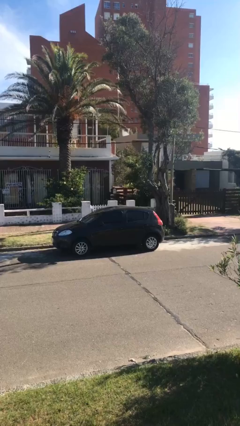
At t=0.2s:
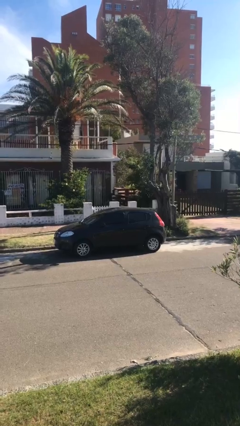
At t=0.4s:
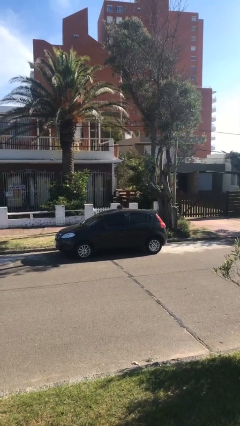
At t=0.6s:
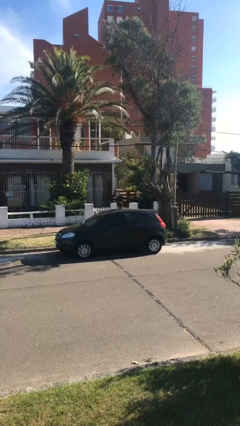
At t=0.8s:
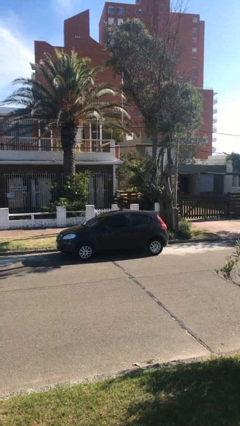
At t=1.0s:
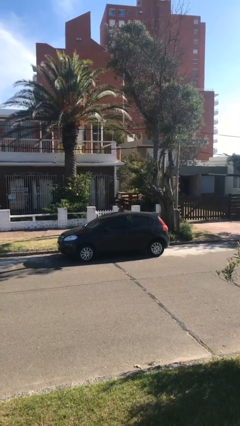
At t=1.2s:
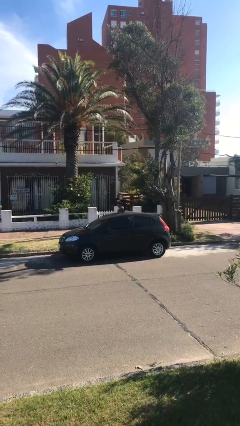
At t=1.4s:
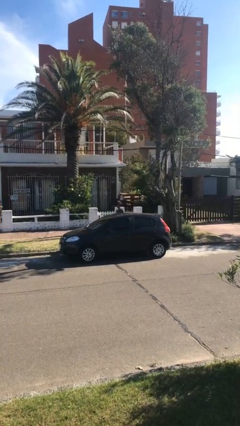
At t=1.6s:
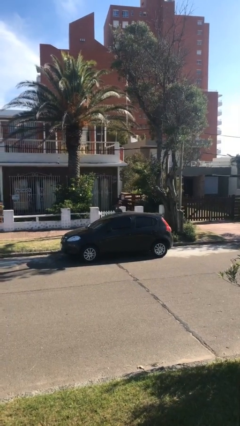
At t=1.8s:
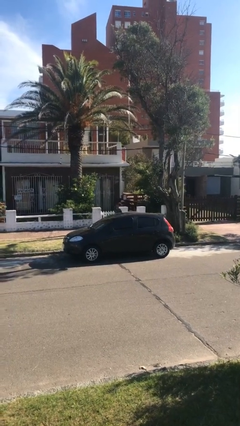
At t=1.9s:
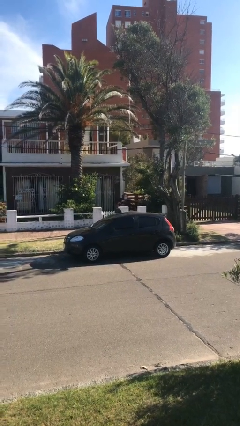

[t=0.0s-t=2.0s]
person exits car

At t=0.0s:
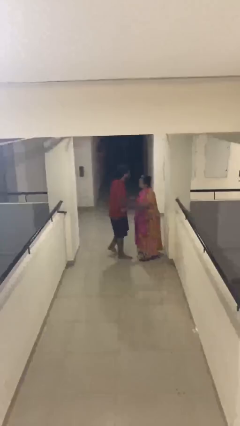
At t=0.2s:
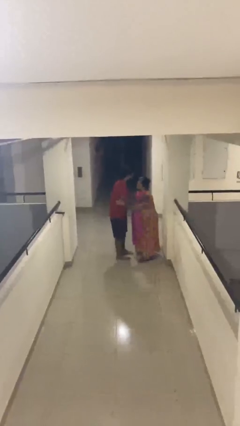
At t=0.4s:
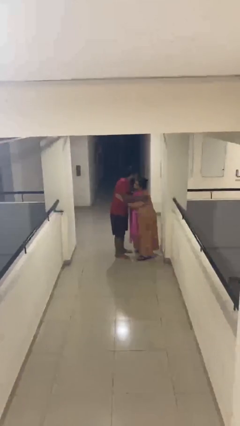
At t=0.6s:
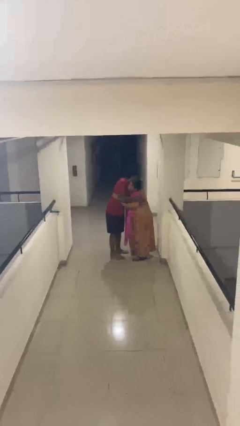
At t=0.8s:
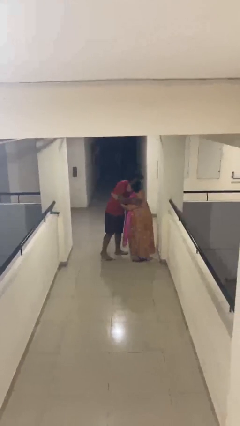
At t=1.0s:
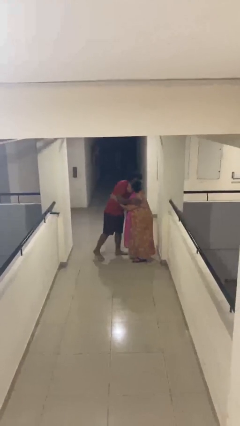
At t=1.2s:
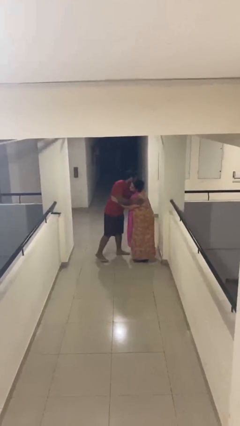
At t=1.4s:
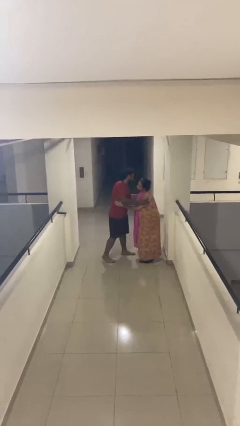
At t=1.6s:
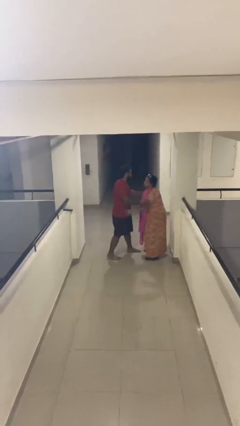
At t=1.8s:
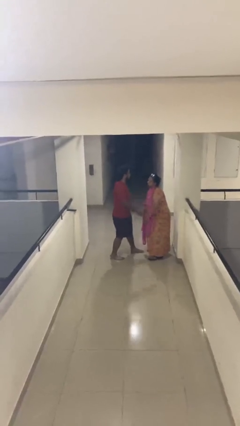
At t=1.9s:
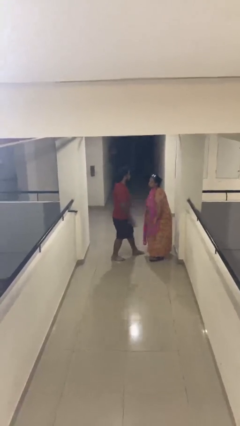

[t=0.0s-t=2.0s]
person embraces person

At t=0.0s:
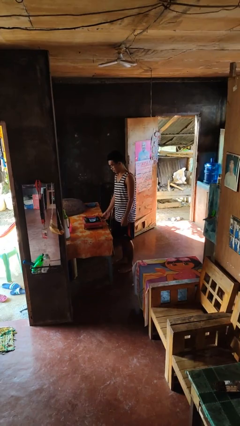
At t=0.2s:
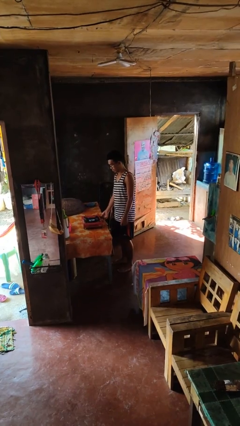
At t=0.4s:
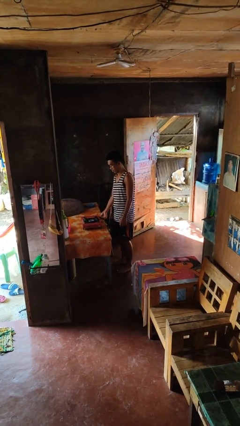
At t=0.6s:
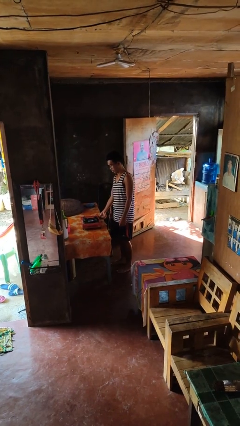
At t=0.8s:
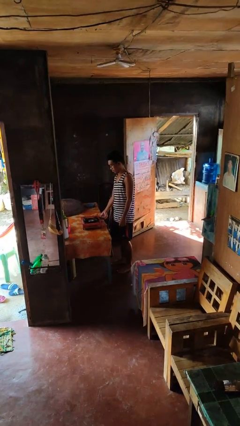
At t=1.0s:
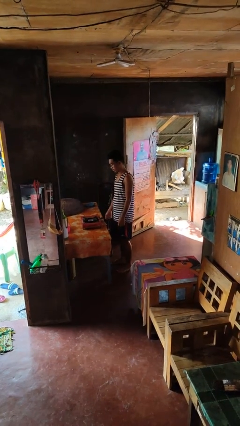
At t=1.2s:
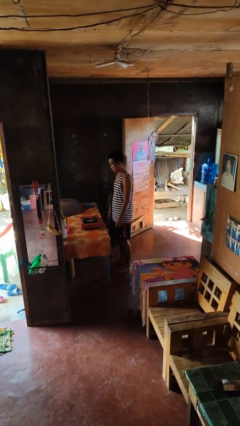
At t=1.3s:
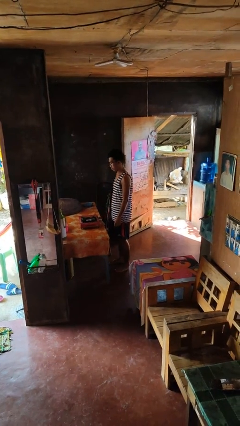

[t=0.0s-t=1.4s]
person turns off stovetop

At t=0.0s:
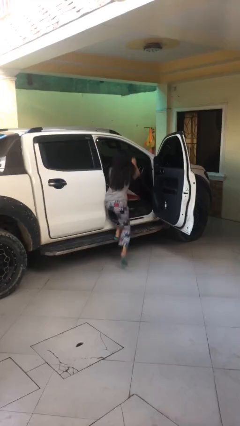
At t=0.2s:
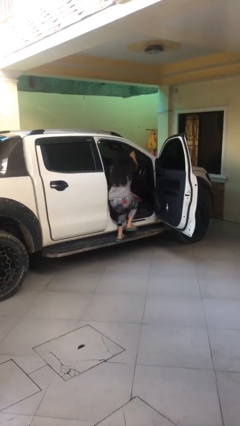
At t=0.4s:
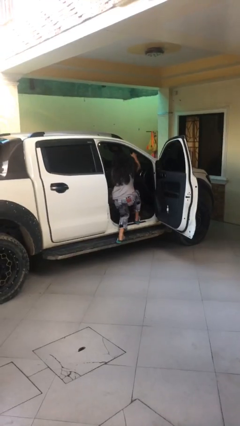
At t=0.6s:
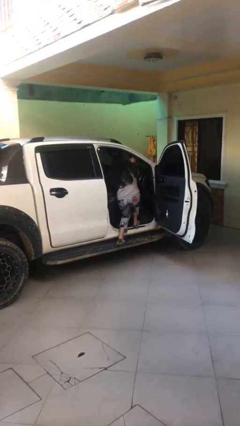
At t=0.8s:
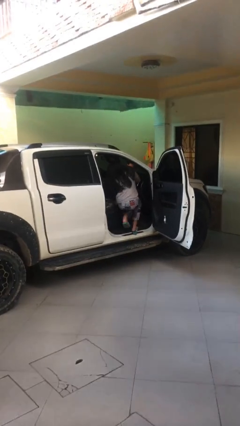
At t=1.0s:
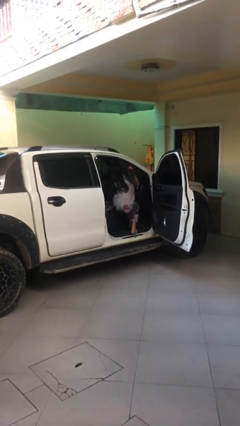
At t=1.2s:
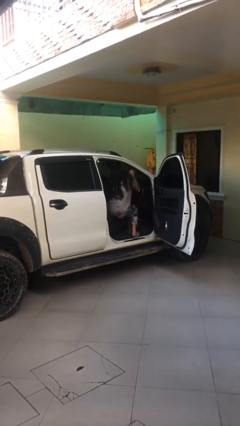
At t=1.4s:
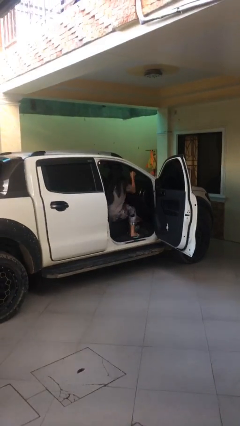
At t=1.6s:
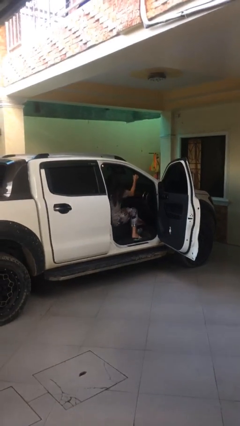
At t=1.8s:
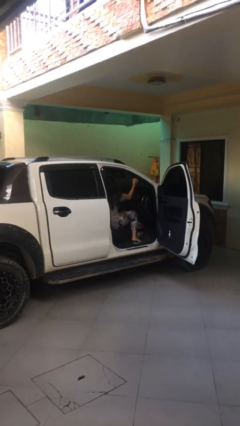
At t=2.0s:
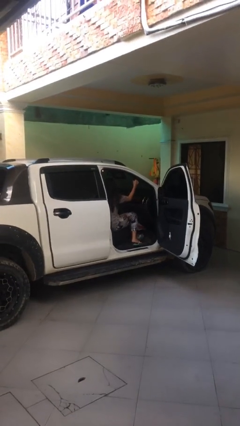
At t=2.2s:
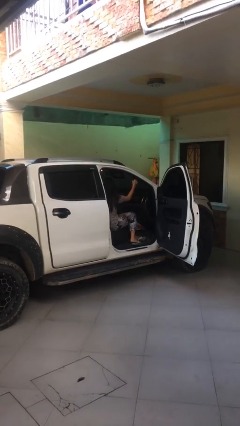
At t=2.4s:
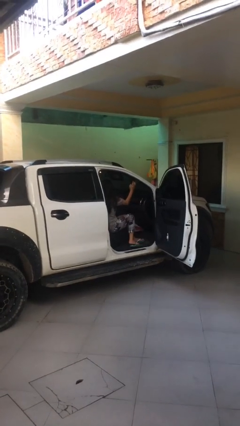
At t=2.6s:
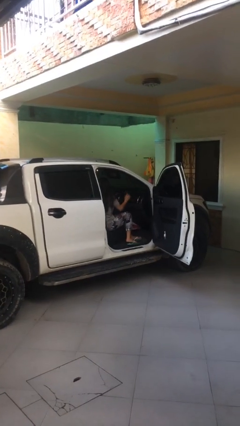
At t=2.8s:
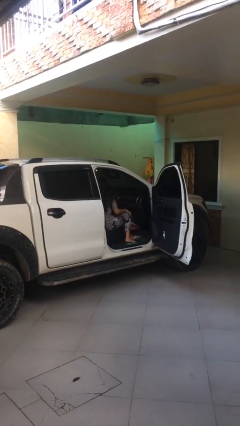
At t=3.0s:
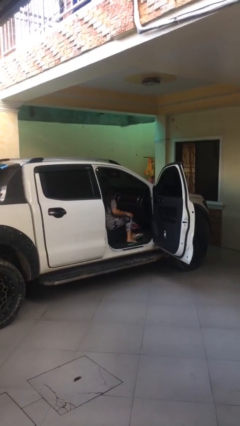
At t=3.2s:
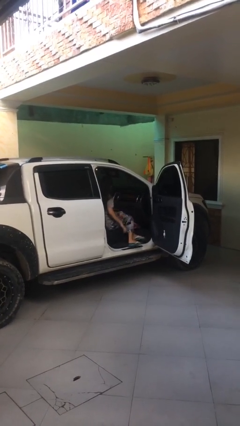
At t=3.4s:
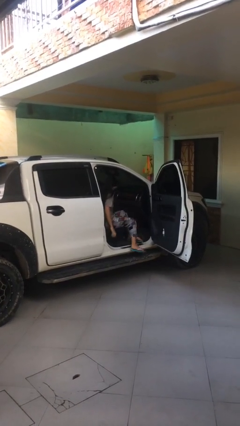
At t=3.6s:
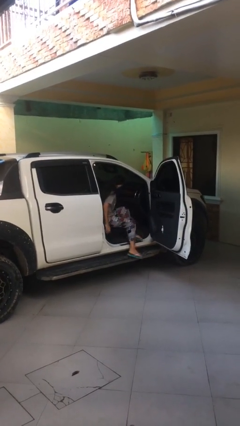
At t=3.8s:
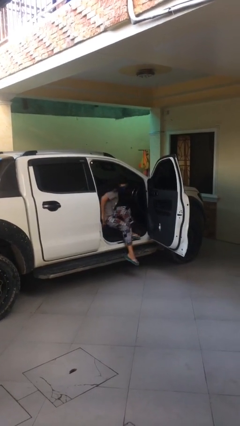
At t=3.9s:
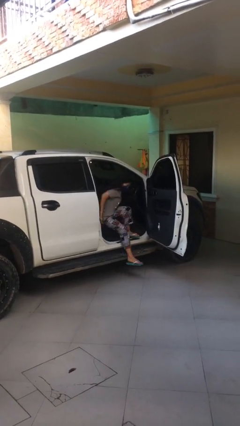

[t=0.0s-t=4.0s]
person enters car

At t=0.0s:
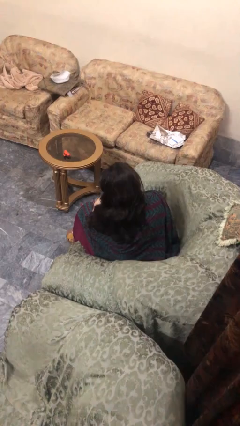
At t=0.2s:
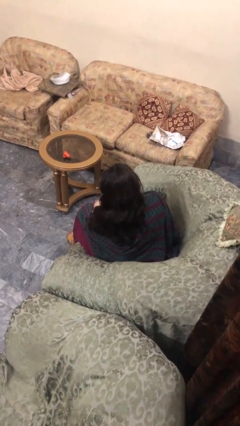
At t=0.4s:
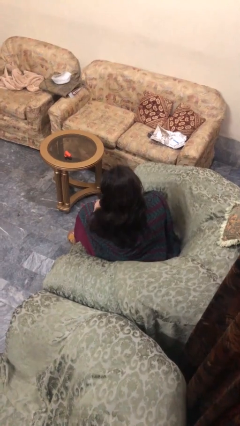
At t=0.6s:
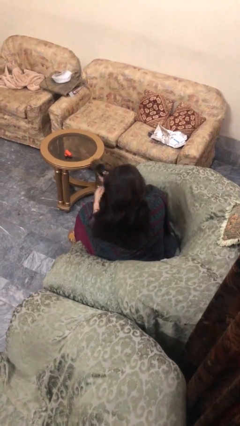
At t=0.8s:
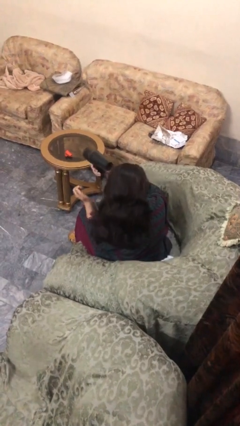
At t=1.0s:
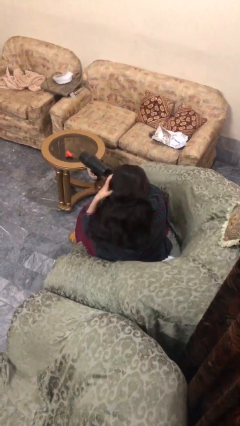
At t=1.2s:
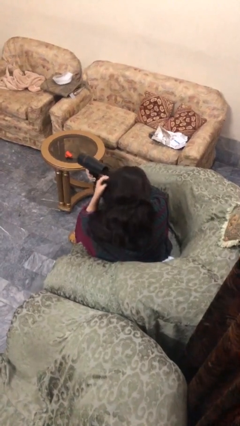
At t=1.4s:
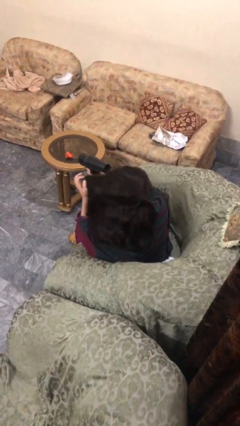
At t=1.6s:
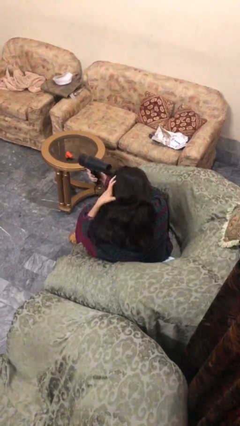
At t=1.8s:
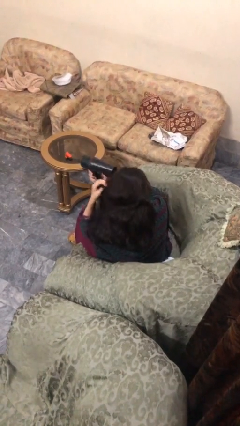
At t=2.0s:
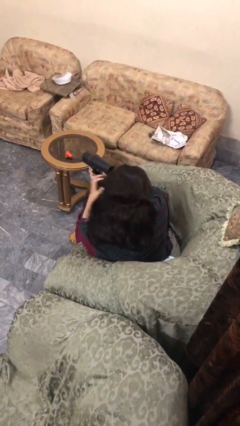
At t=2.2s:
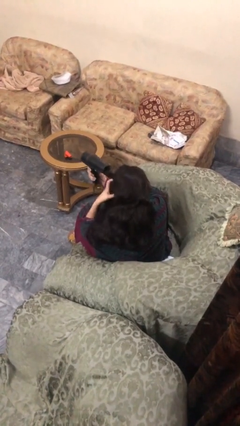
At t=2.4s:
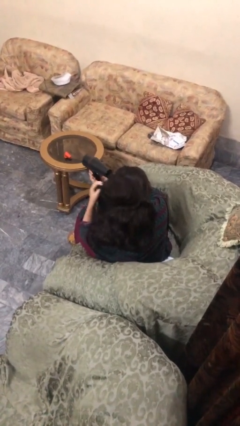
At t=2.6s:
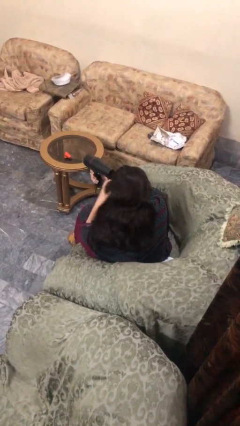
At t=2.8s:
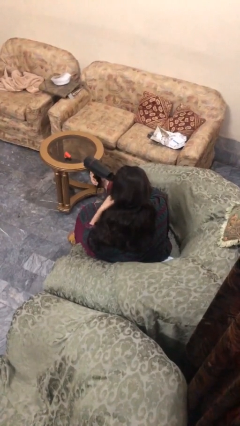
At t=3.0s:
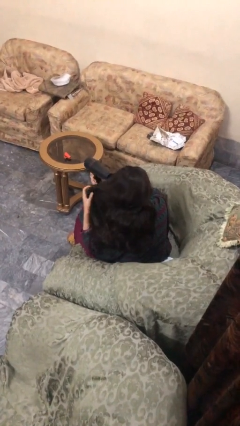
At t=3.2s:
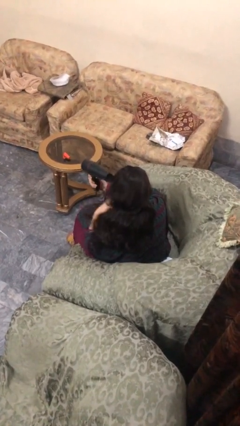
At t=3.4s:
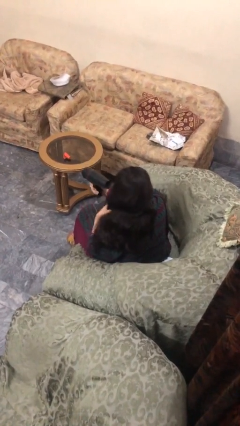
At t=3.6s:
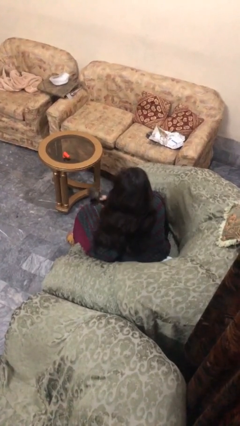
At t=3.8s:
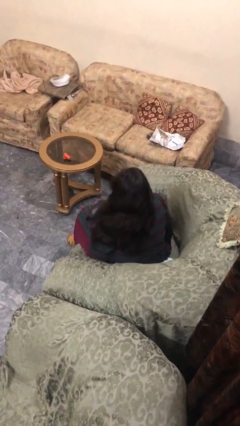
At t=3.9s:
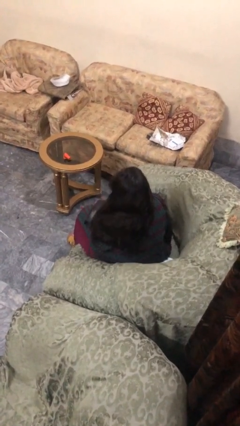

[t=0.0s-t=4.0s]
person dries hair with hairdryer

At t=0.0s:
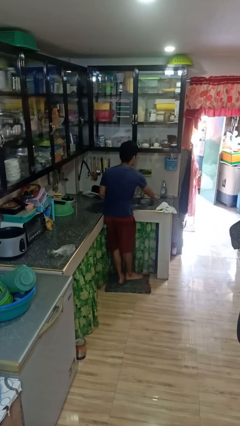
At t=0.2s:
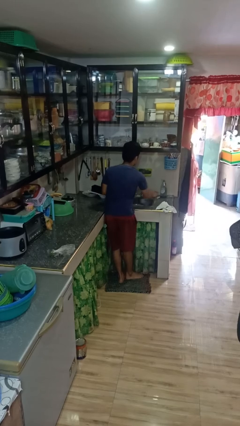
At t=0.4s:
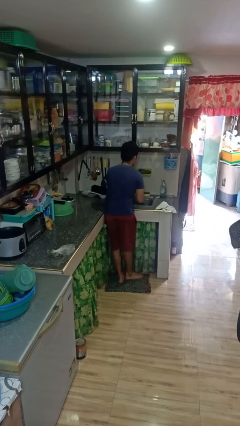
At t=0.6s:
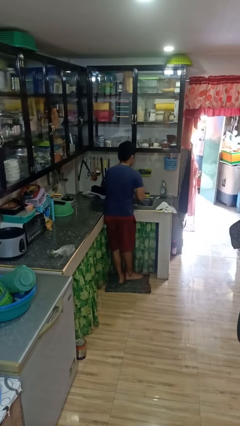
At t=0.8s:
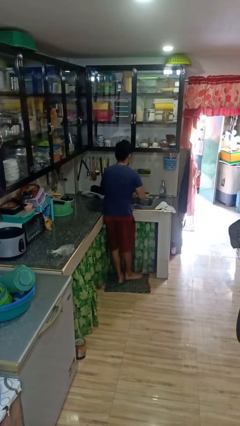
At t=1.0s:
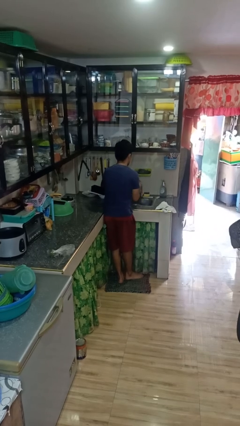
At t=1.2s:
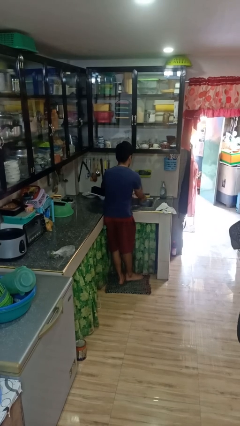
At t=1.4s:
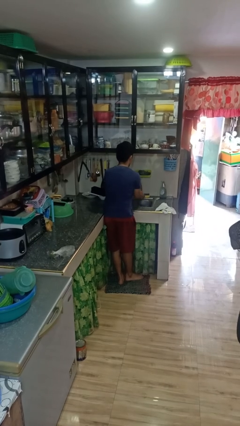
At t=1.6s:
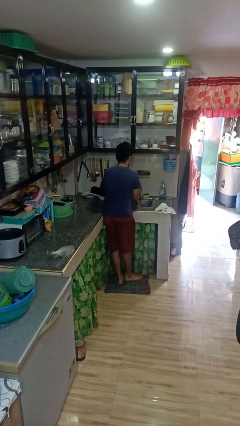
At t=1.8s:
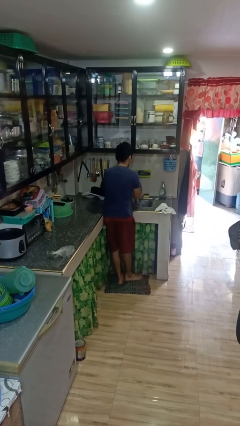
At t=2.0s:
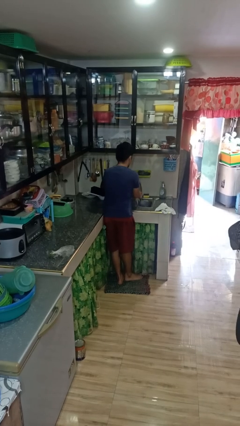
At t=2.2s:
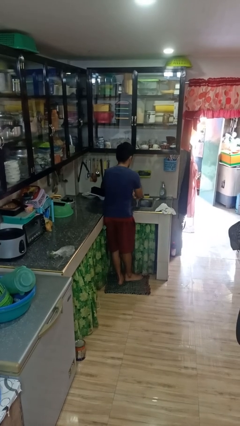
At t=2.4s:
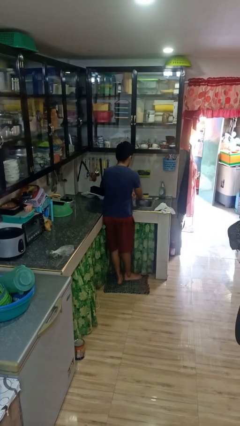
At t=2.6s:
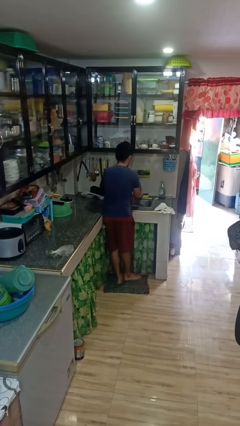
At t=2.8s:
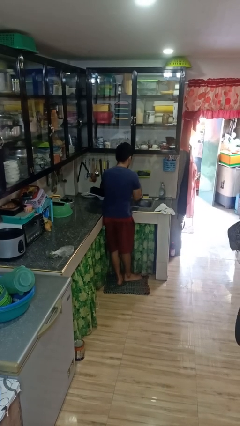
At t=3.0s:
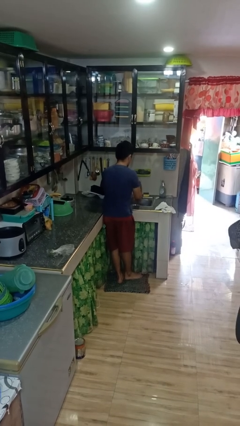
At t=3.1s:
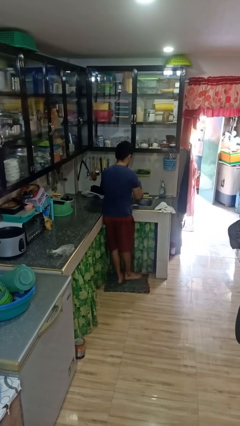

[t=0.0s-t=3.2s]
person washes hands

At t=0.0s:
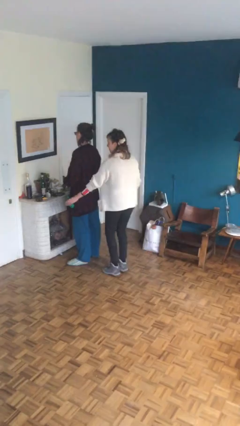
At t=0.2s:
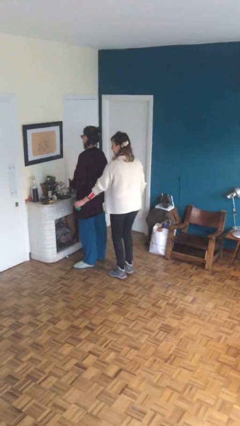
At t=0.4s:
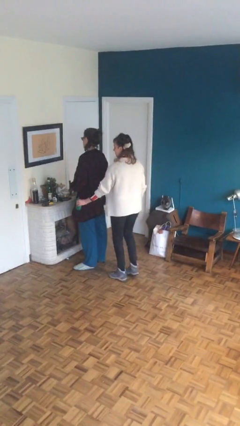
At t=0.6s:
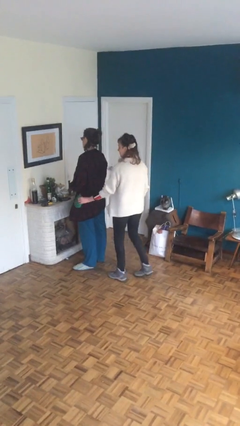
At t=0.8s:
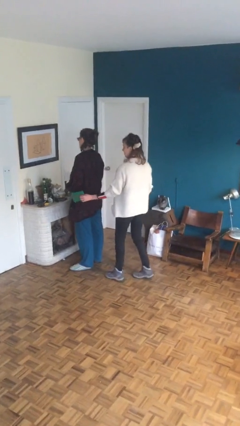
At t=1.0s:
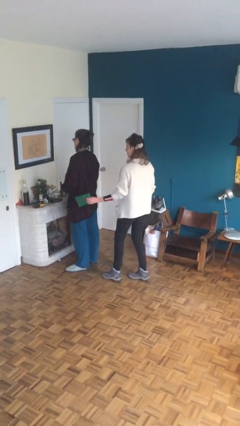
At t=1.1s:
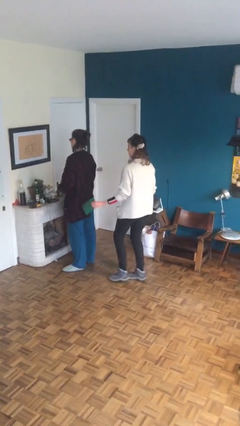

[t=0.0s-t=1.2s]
person steals object from person
